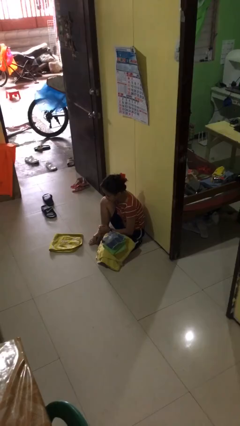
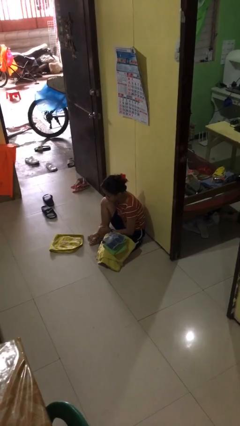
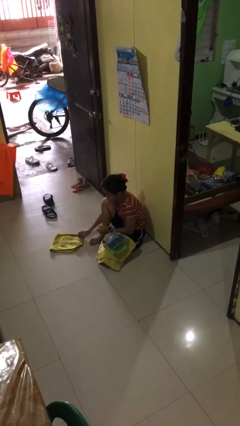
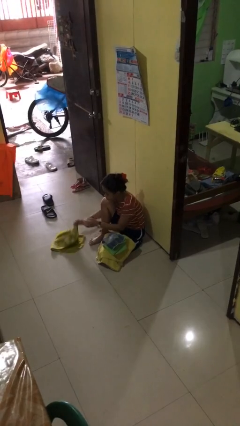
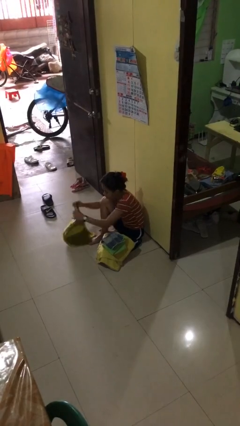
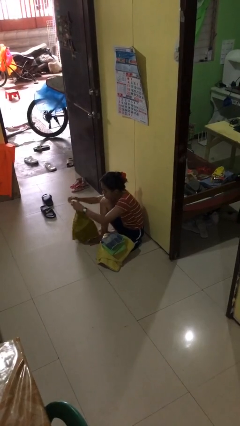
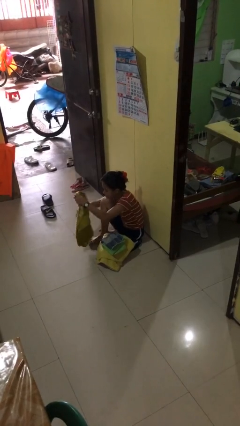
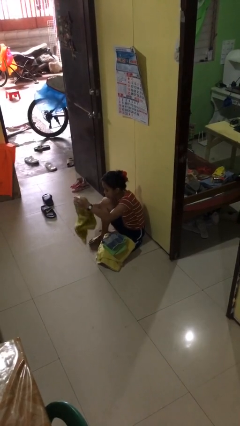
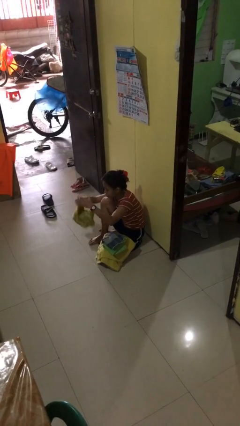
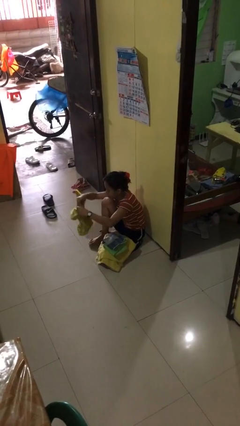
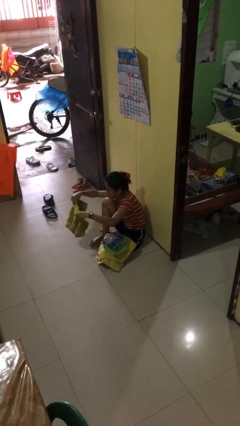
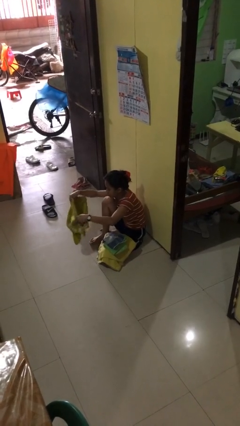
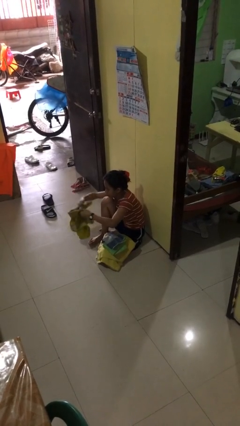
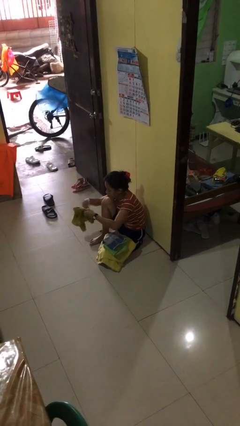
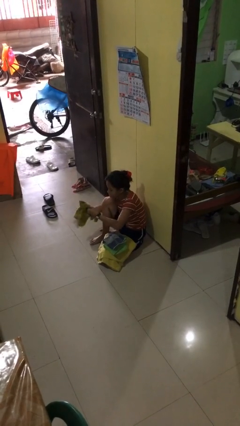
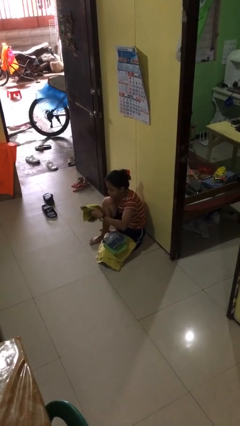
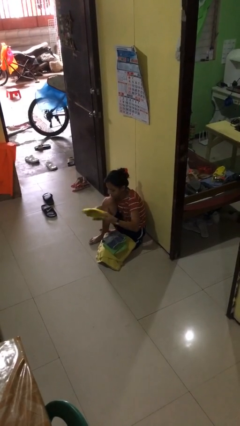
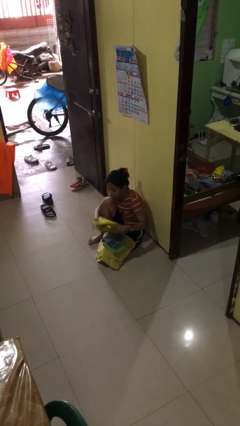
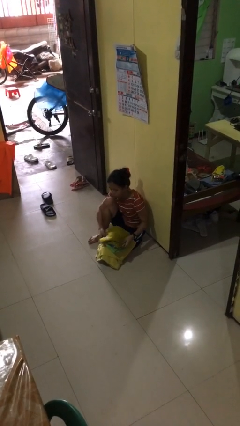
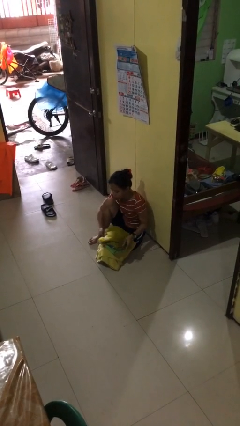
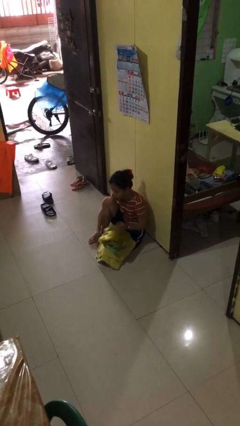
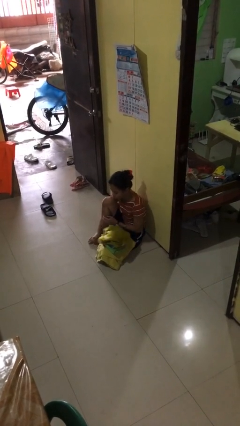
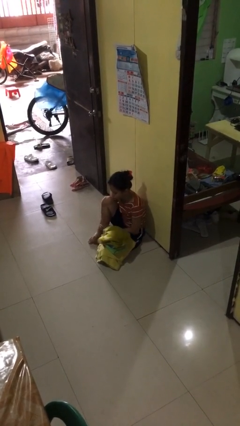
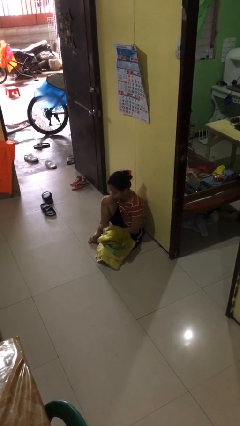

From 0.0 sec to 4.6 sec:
person folds towel

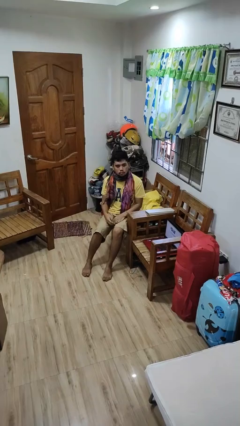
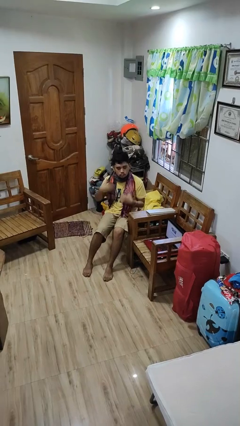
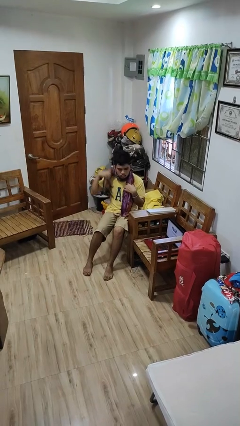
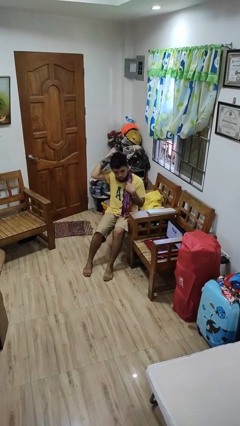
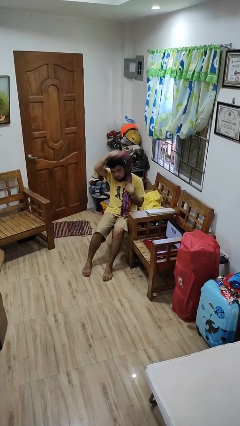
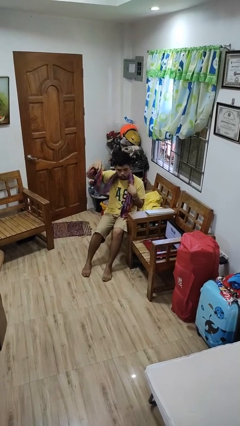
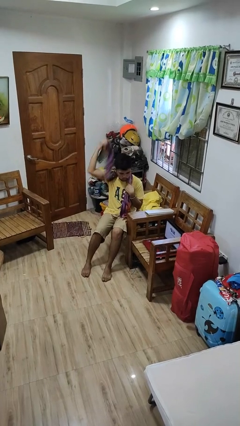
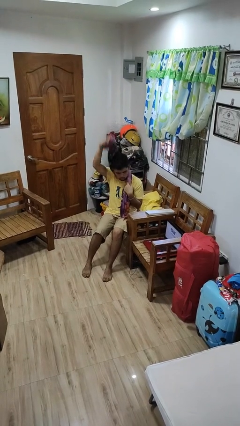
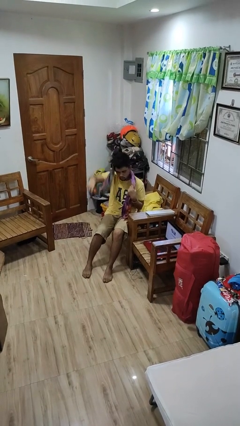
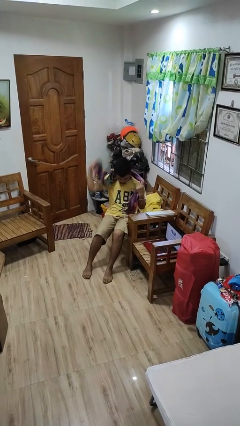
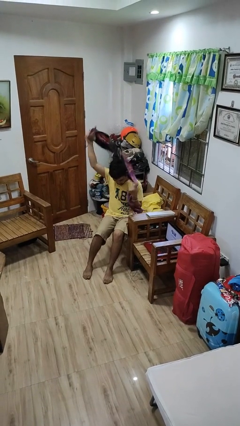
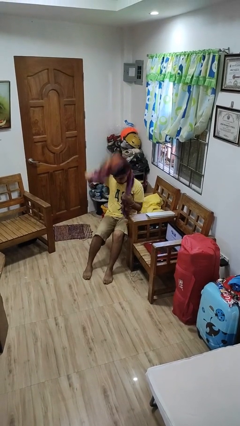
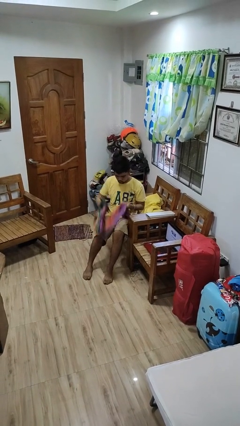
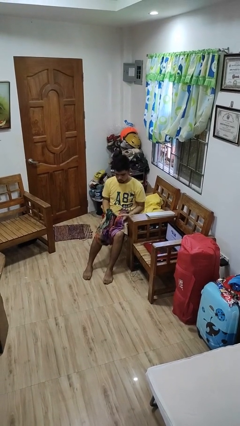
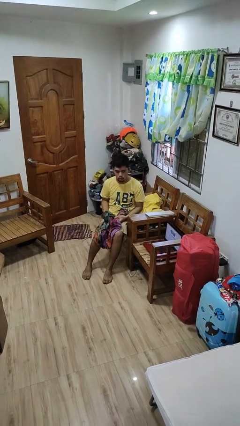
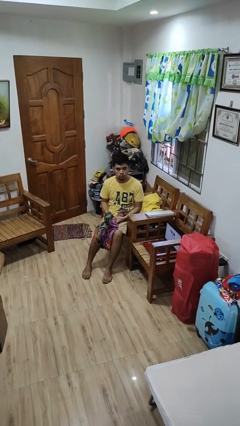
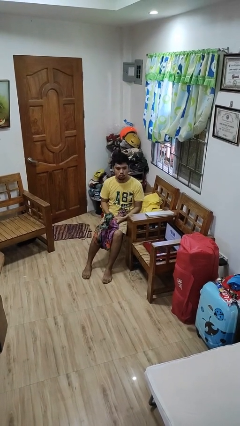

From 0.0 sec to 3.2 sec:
person takes off scarf

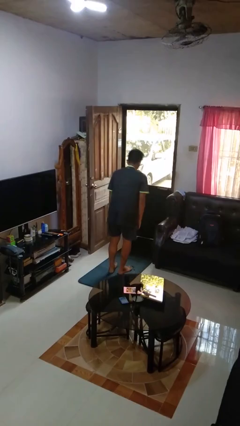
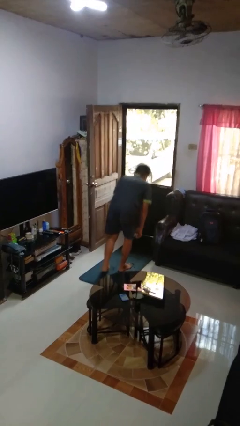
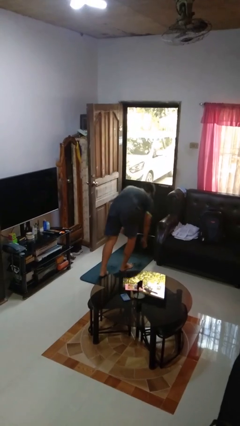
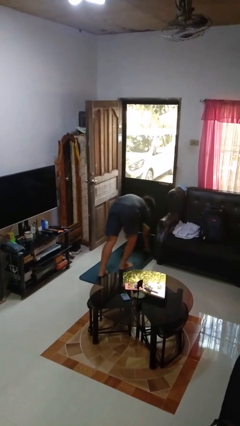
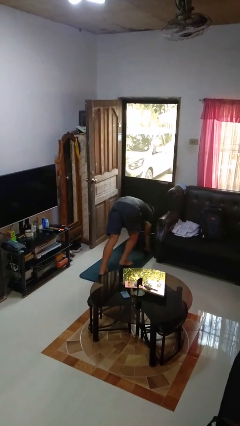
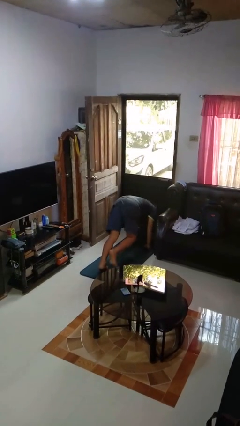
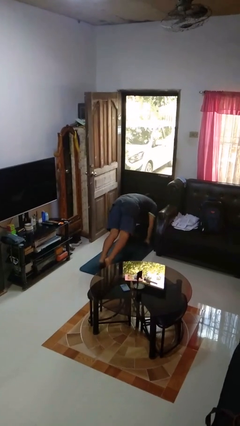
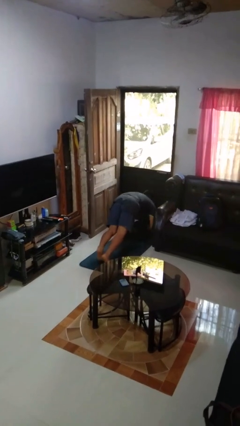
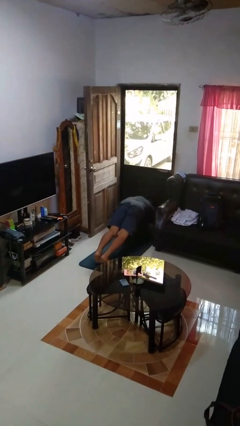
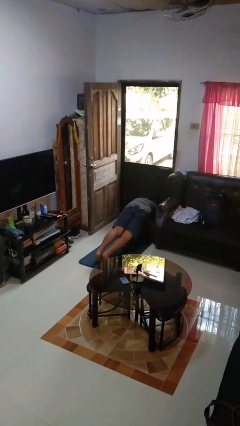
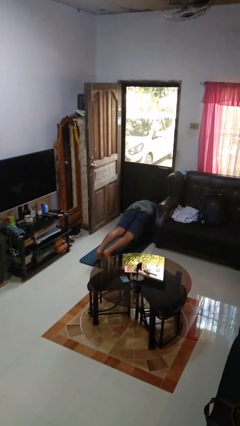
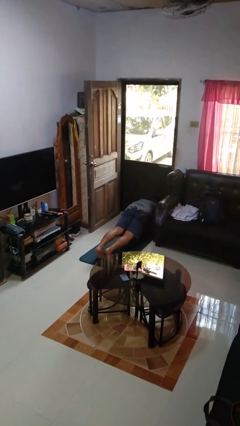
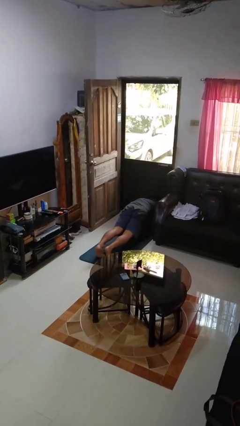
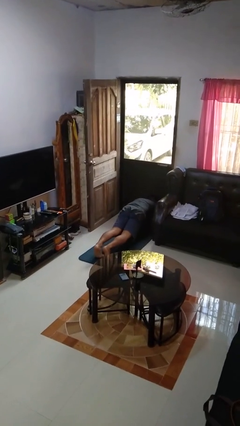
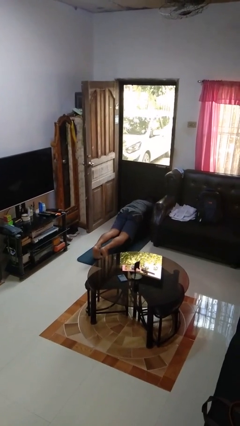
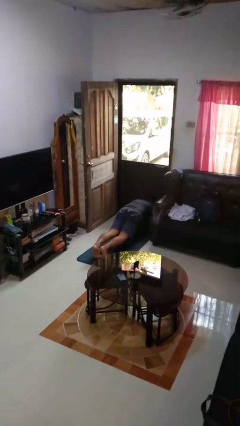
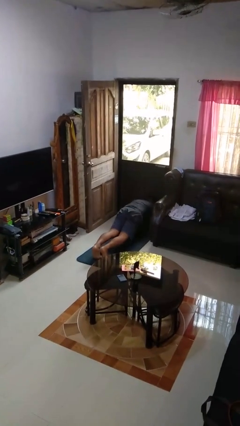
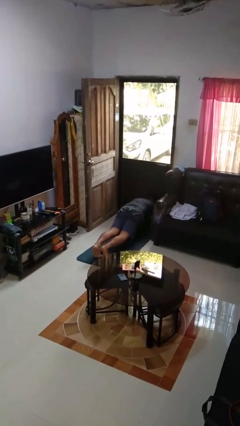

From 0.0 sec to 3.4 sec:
person exercises with plank

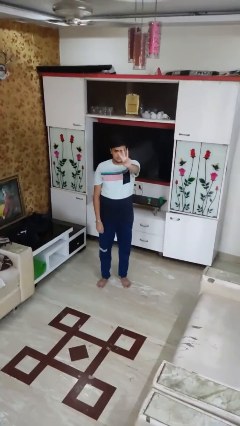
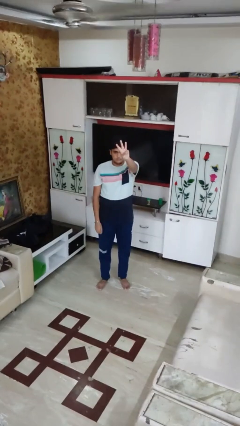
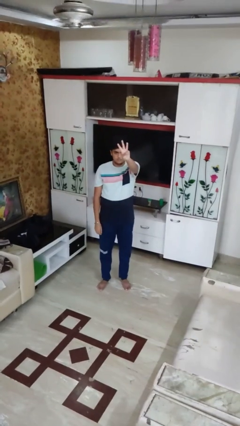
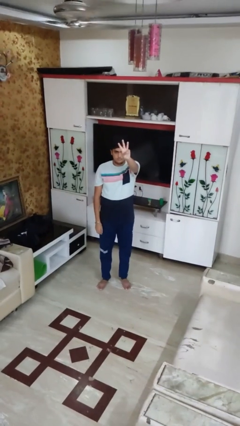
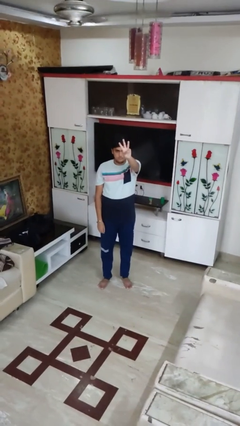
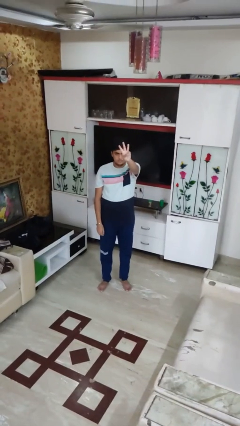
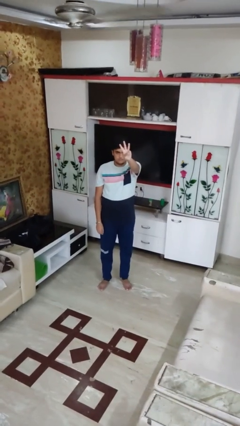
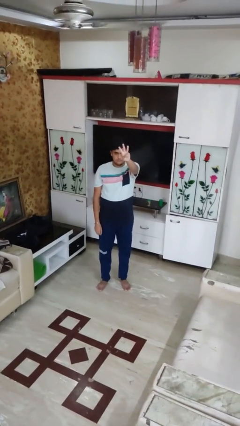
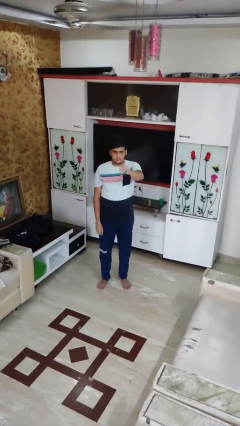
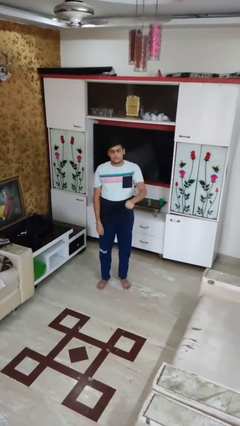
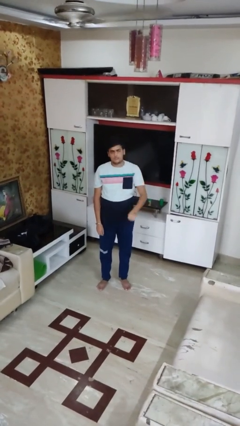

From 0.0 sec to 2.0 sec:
person gestures number three

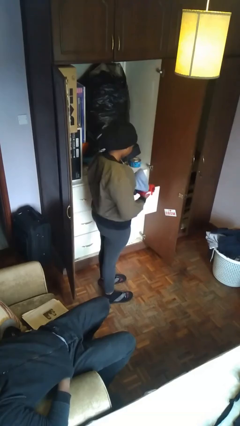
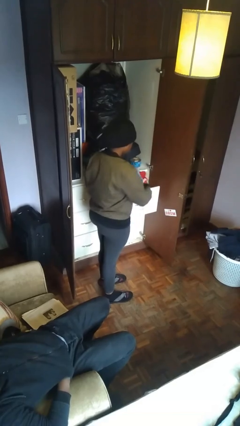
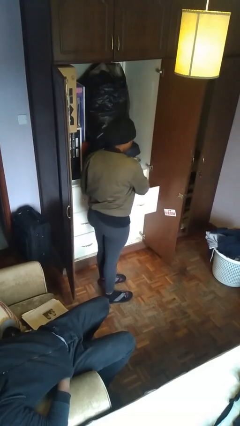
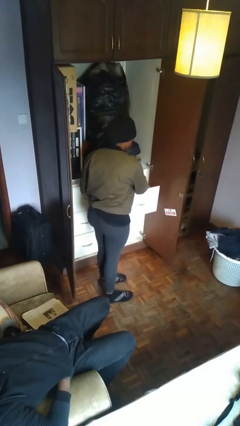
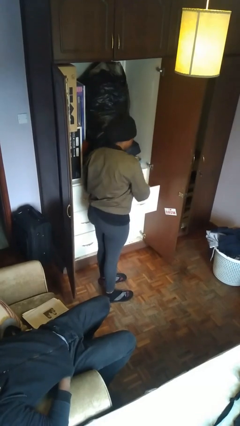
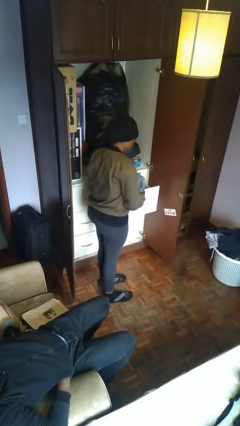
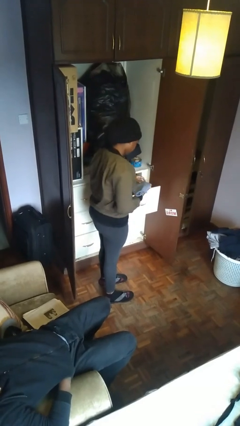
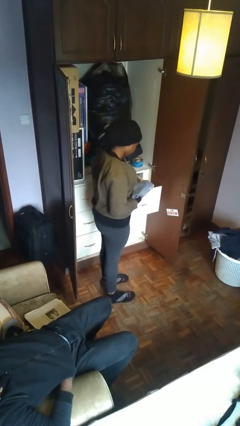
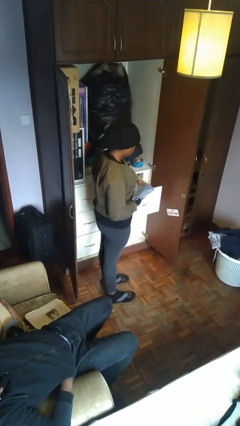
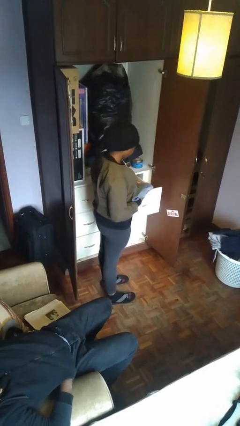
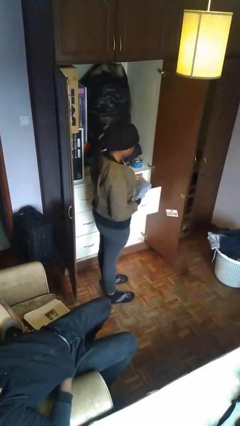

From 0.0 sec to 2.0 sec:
person puts clothes into dresser

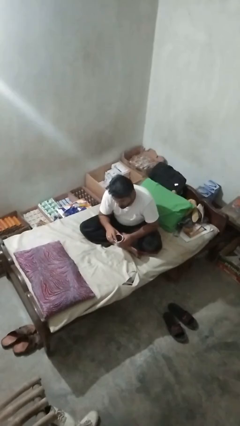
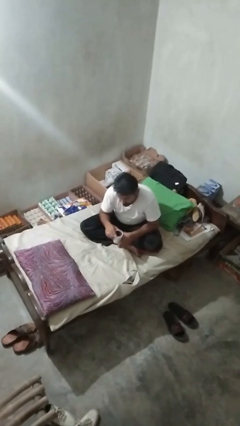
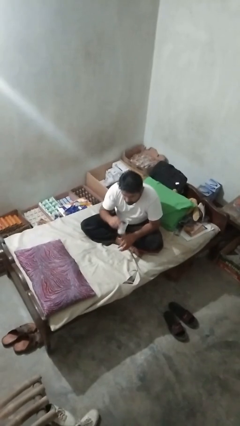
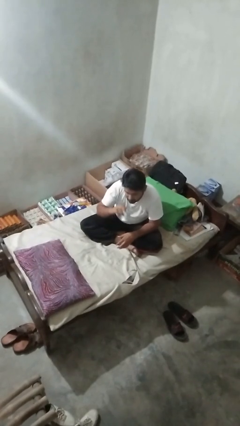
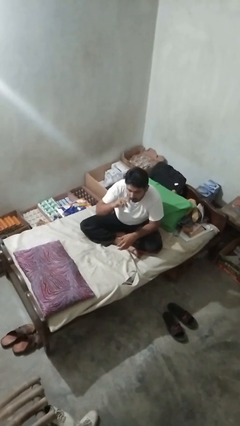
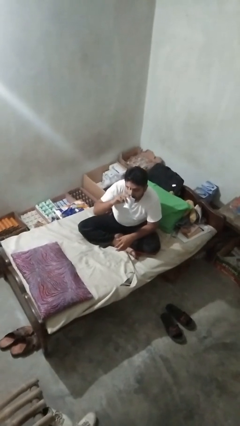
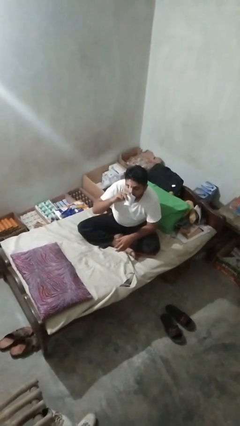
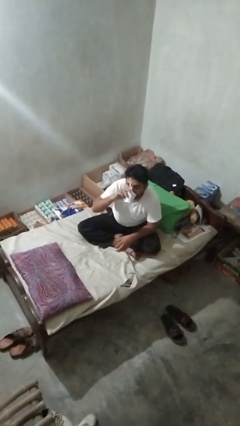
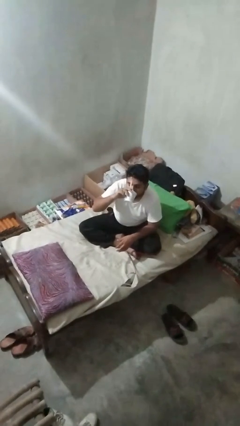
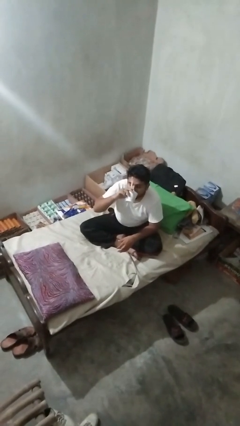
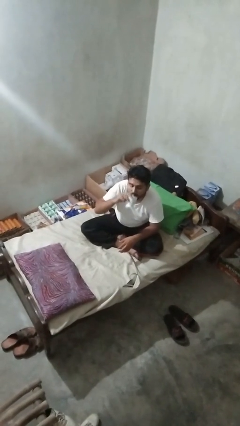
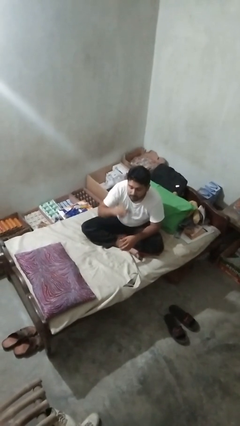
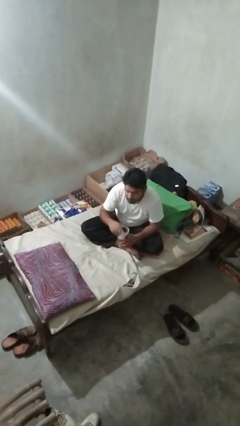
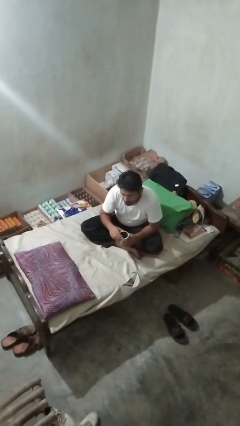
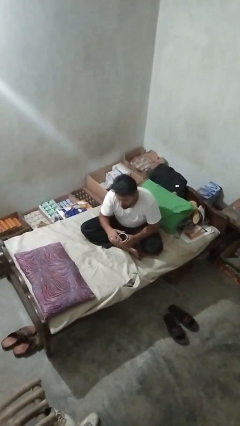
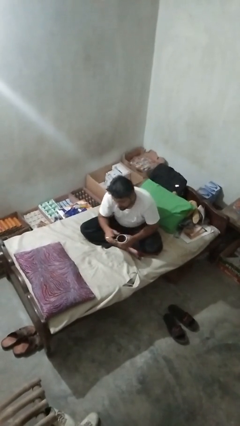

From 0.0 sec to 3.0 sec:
person drinks from mug
